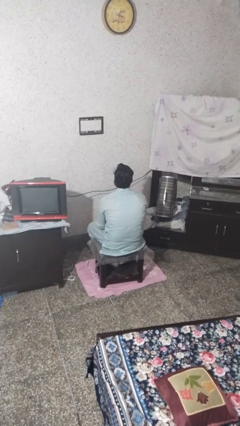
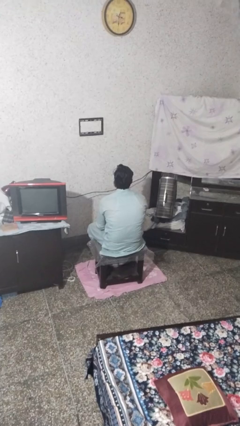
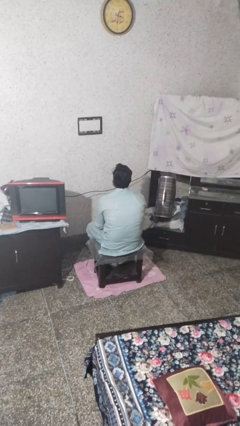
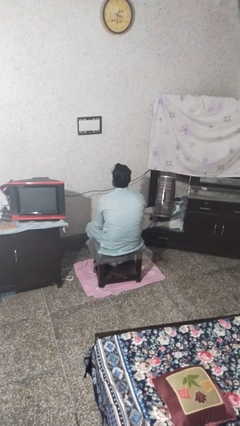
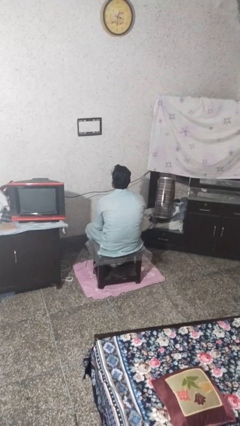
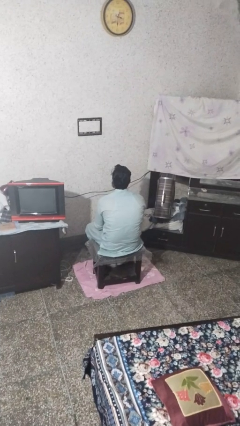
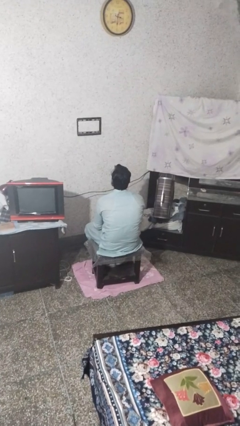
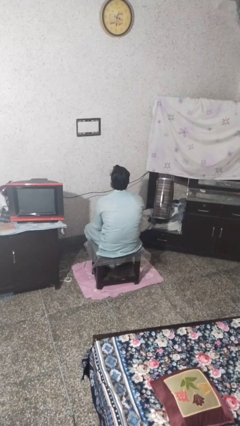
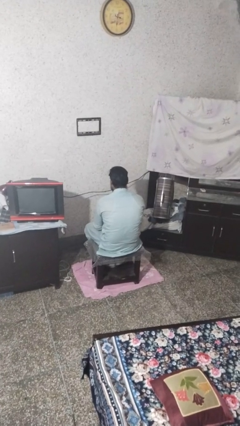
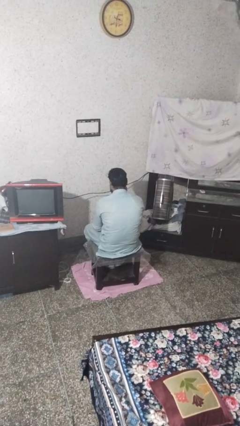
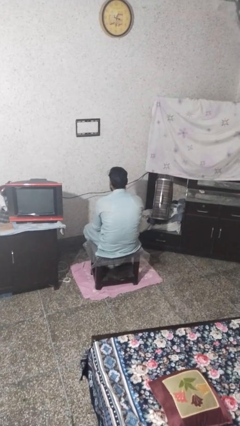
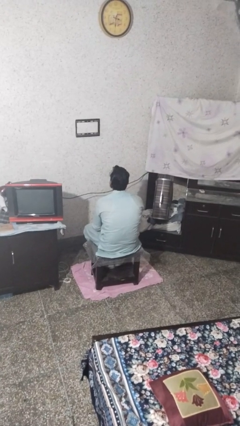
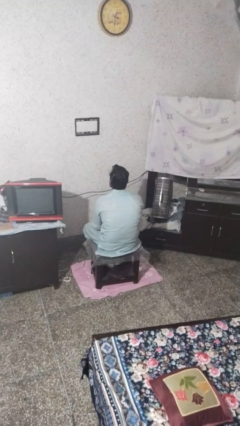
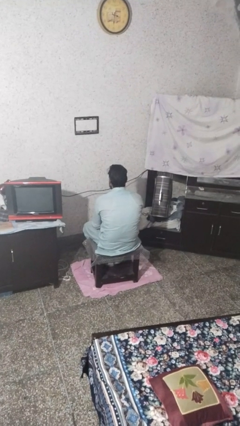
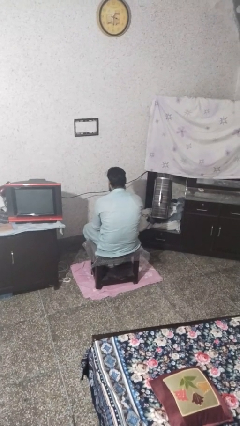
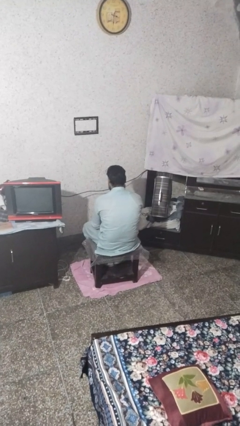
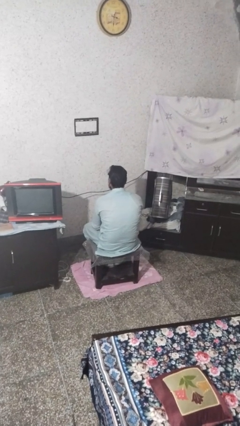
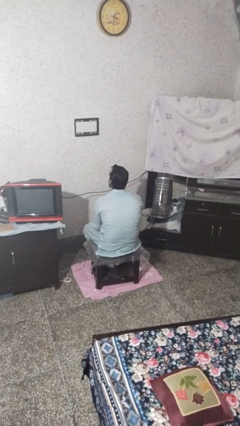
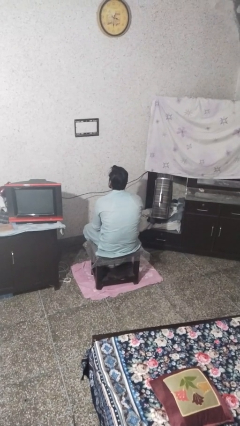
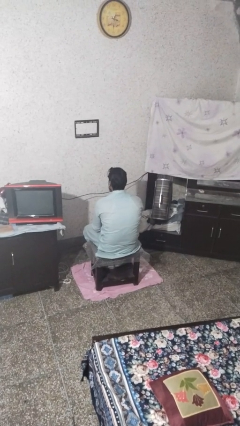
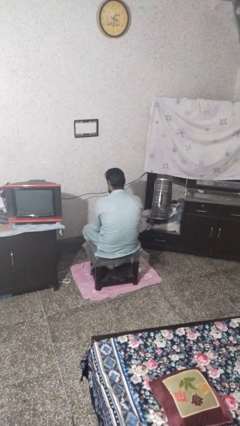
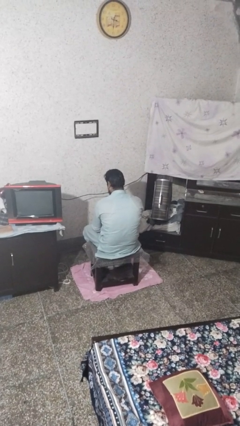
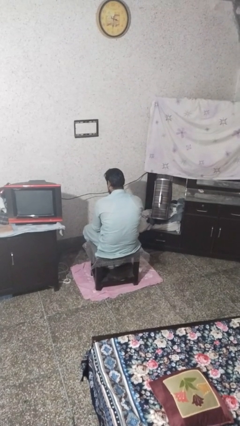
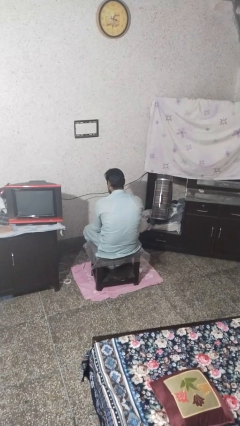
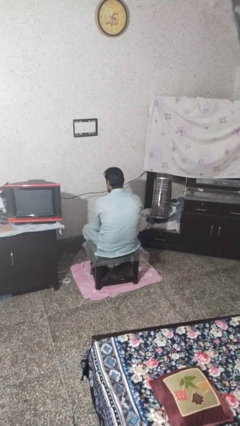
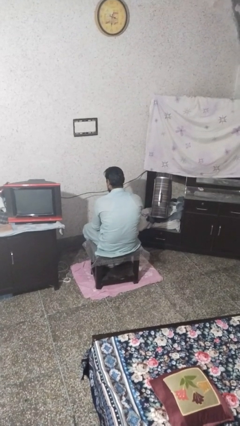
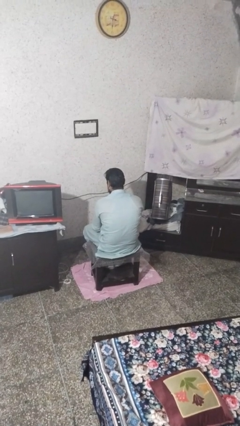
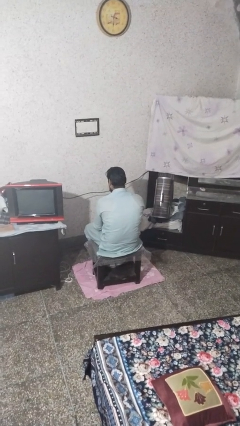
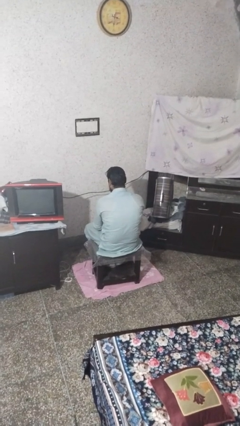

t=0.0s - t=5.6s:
person nods head

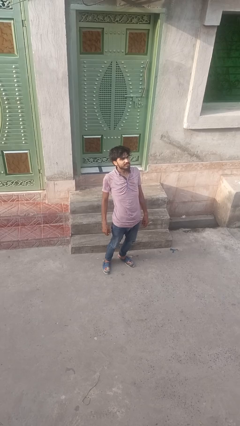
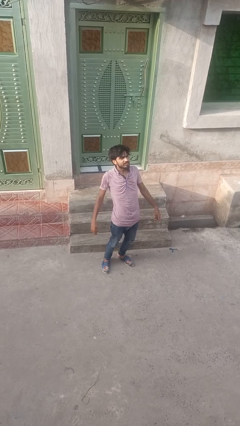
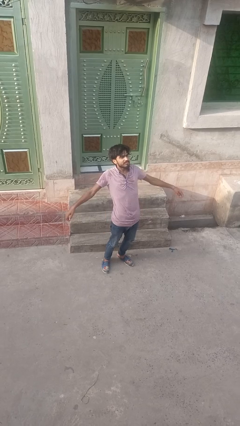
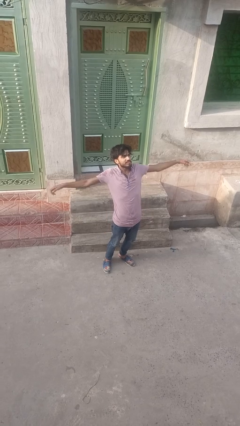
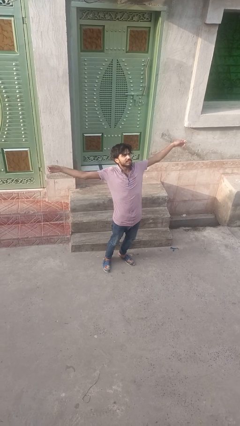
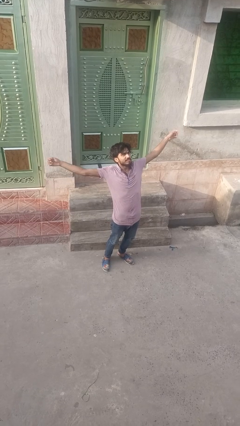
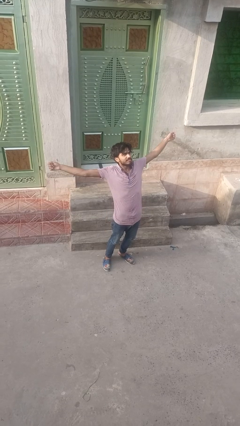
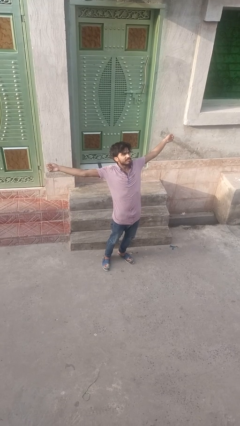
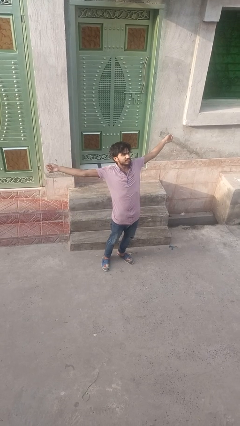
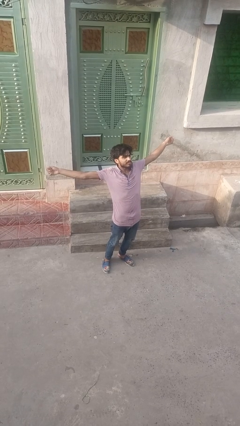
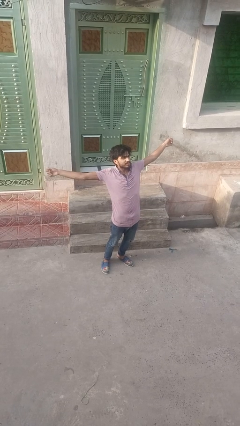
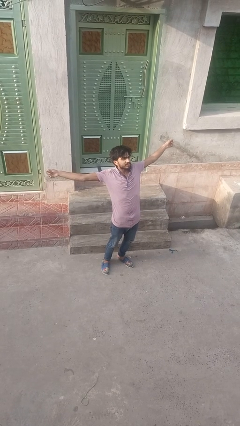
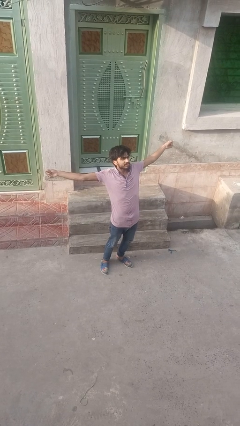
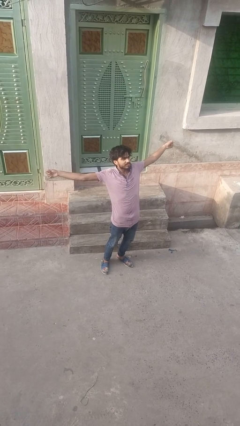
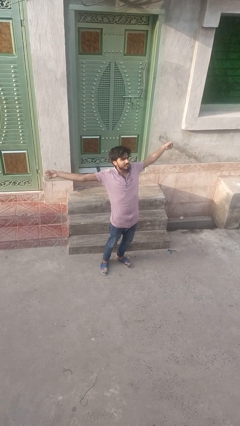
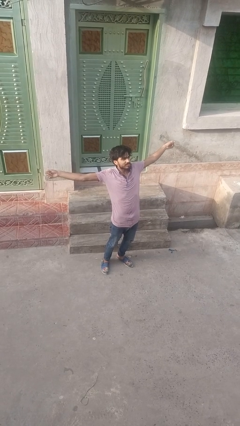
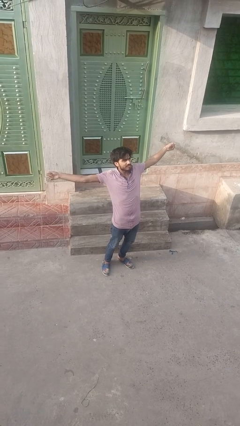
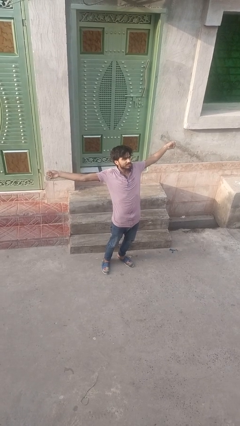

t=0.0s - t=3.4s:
person stretches arms to side

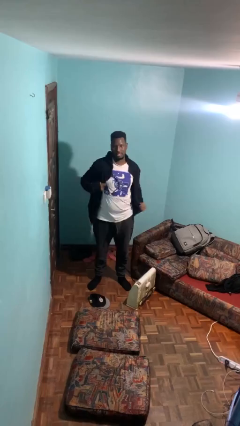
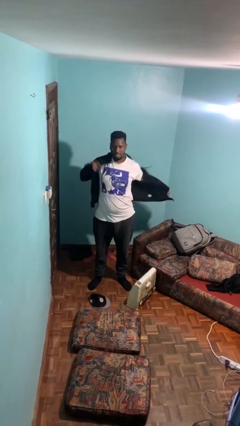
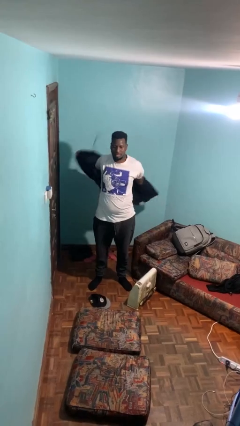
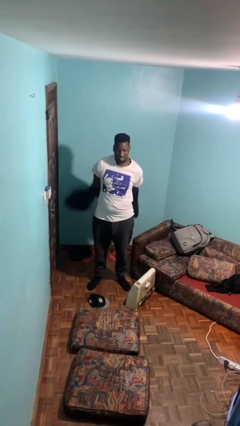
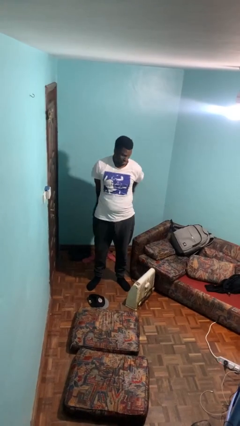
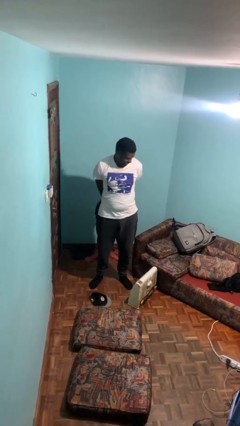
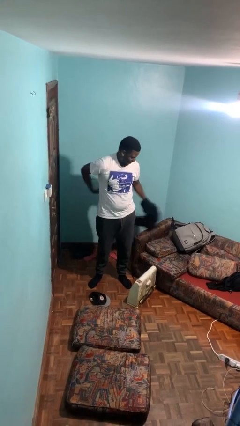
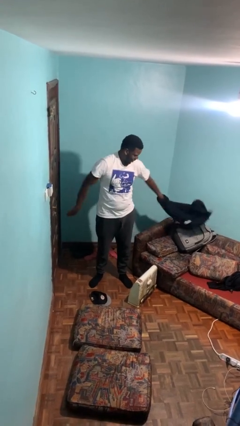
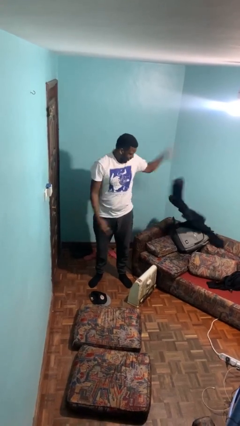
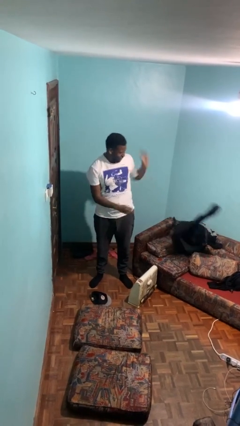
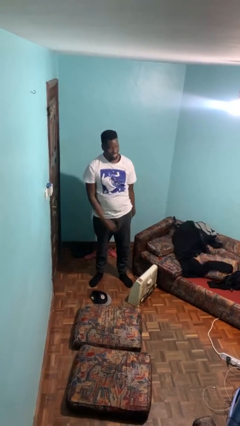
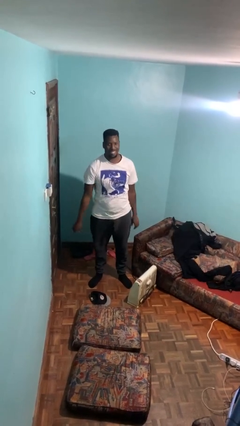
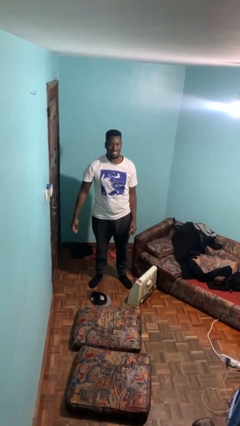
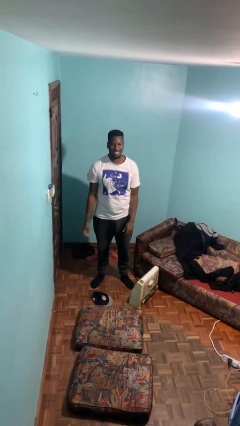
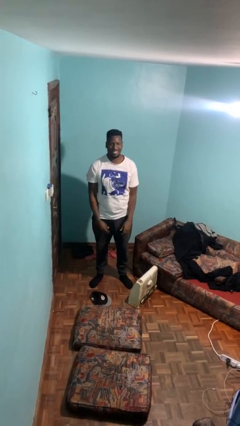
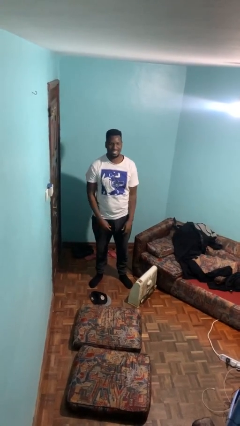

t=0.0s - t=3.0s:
person takes off jacket

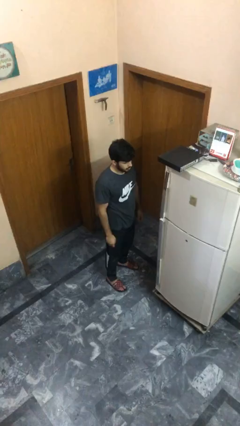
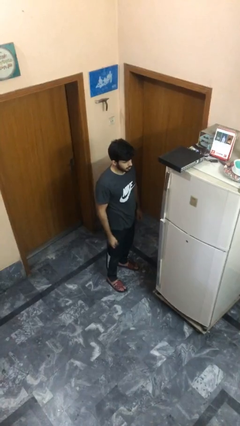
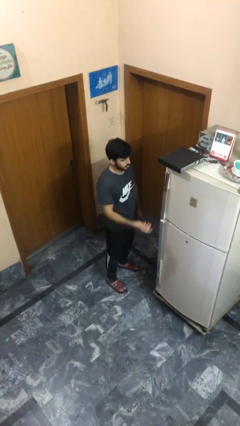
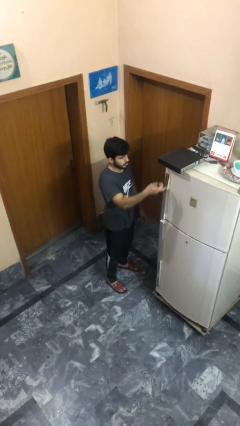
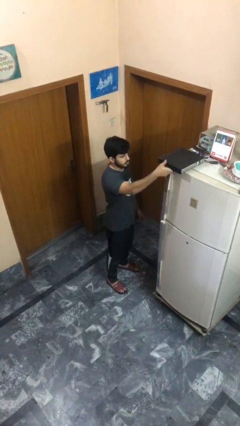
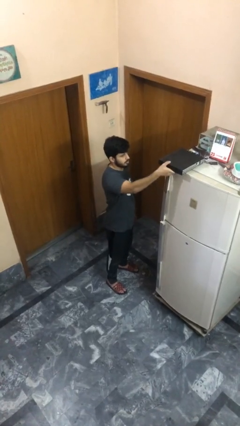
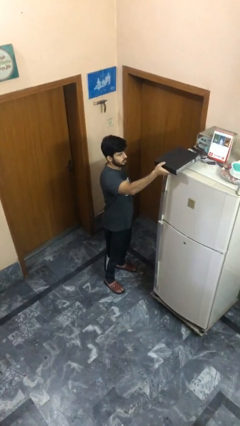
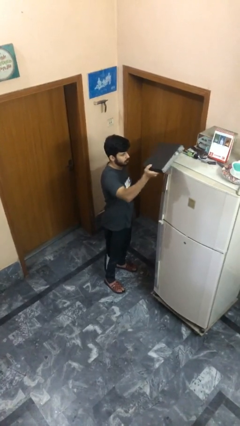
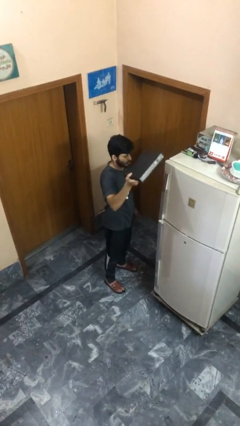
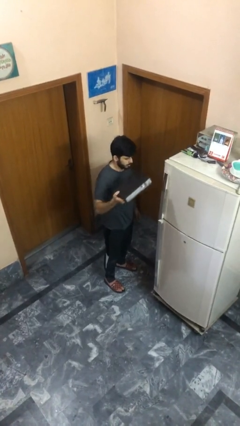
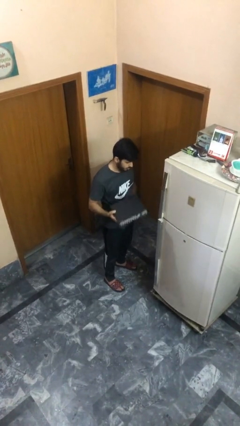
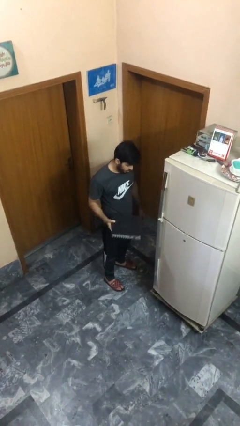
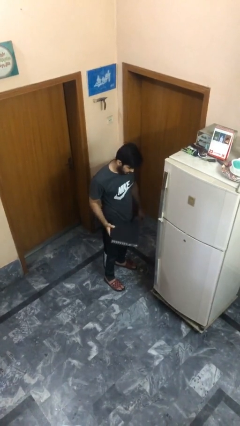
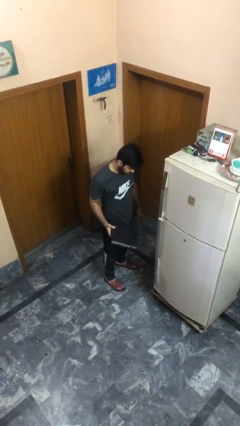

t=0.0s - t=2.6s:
person picks up object from countertop

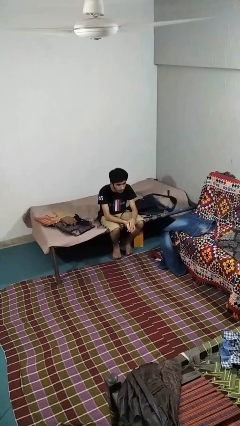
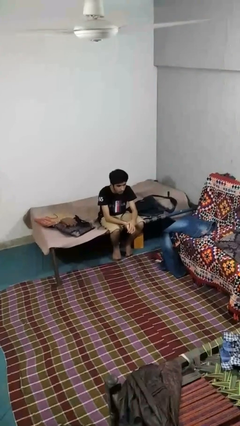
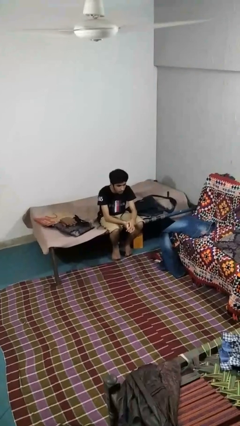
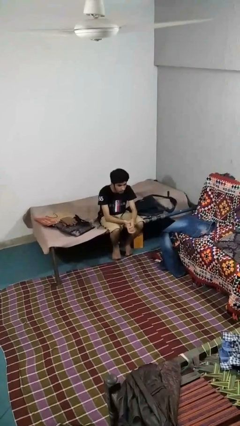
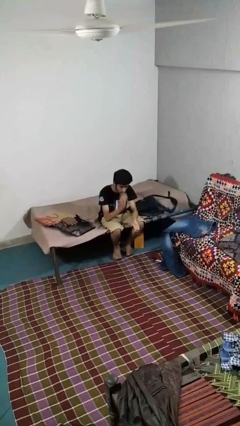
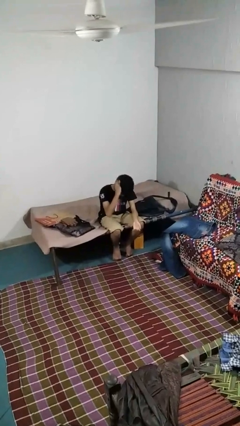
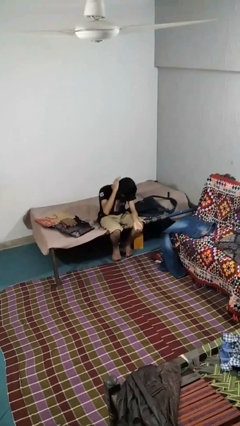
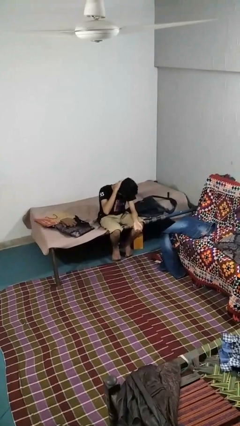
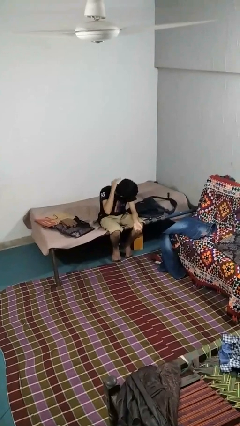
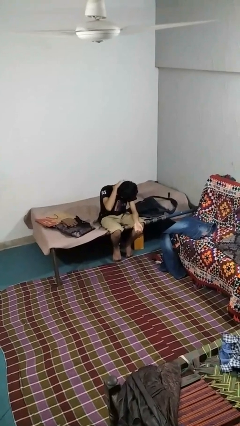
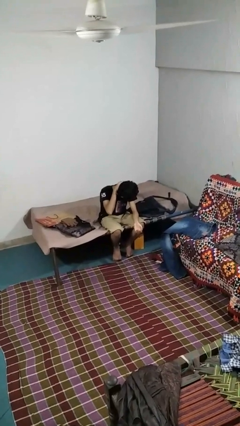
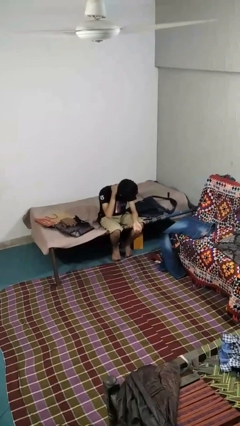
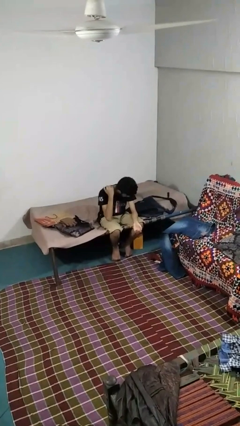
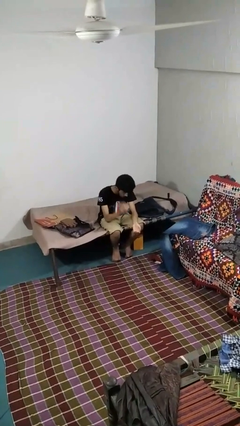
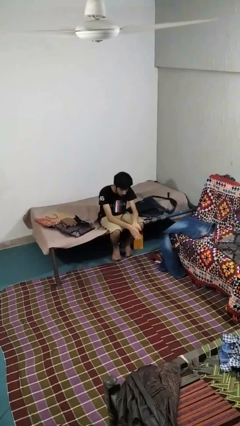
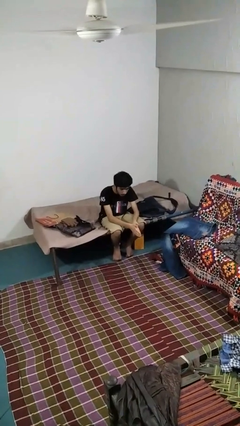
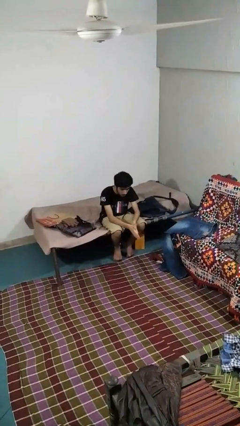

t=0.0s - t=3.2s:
person strokes hair
